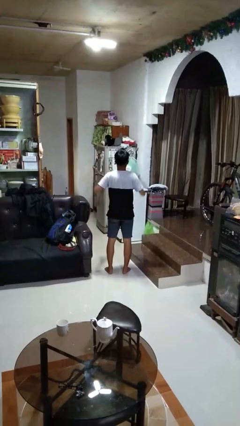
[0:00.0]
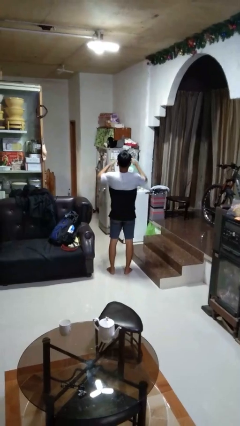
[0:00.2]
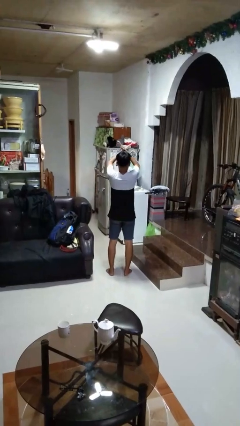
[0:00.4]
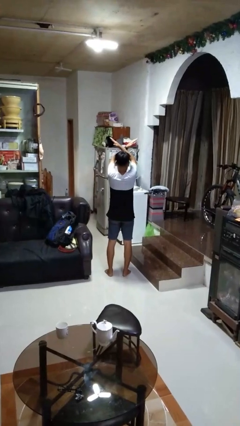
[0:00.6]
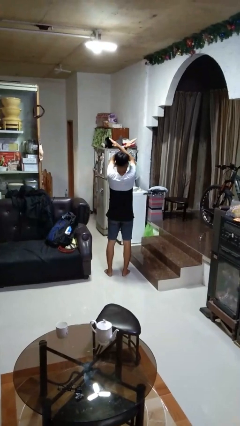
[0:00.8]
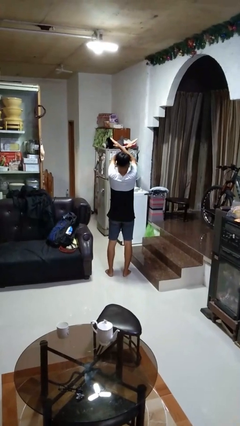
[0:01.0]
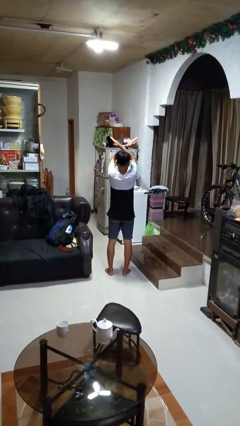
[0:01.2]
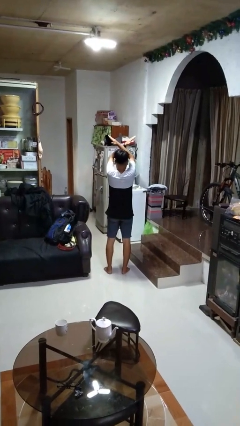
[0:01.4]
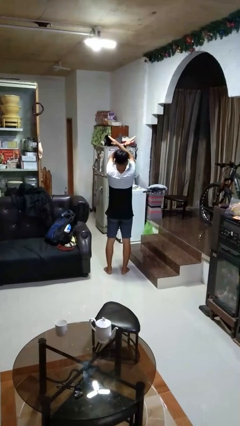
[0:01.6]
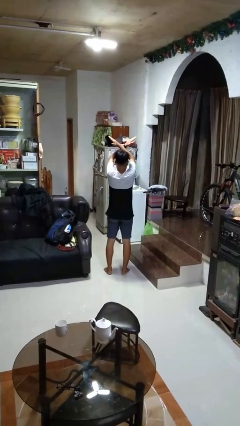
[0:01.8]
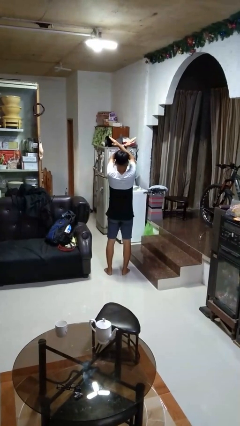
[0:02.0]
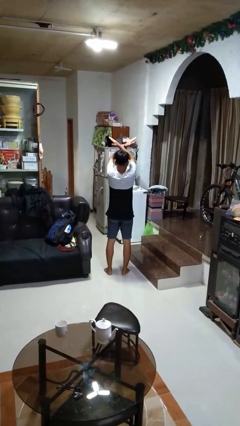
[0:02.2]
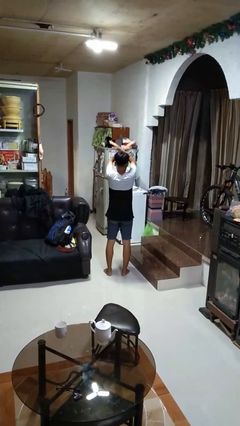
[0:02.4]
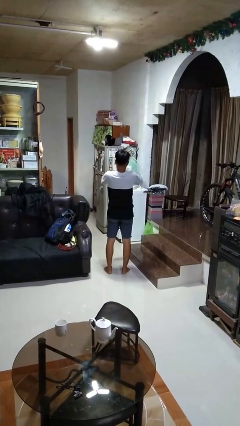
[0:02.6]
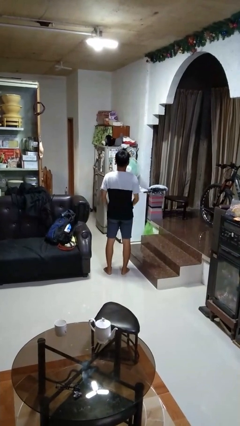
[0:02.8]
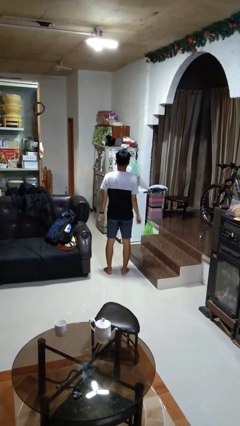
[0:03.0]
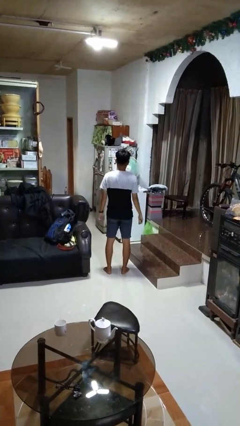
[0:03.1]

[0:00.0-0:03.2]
person gestures arms x

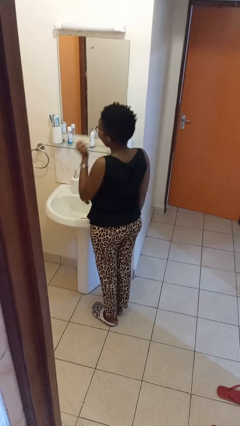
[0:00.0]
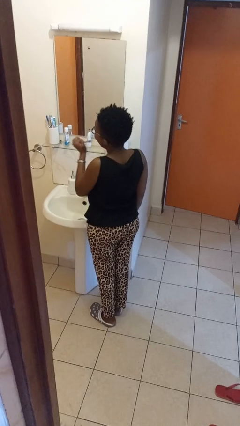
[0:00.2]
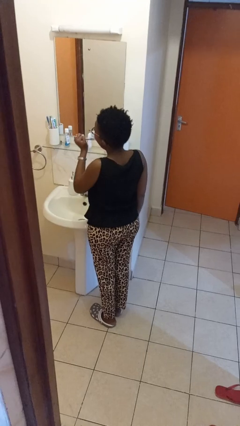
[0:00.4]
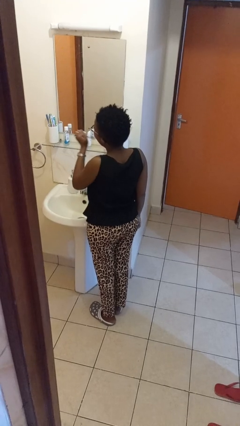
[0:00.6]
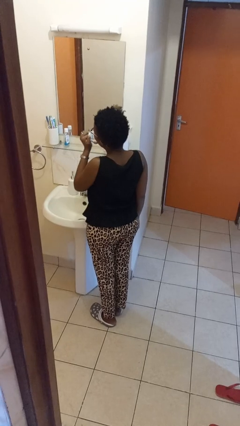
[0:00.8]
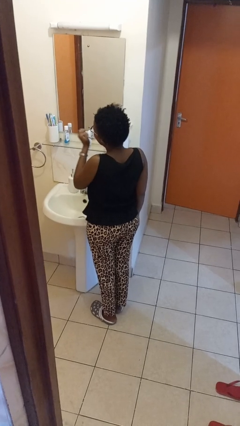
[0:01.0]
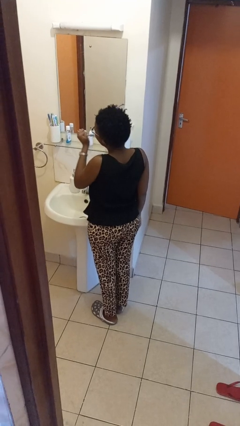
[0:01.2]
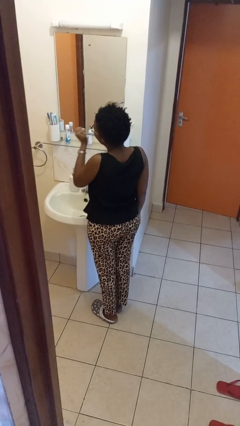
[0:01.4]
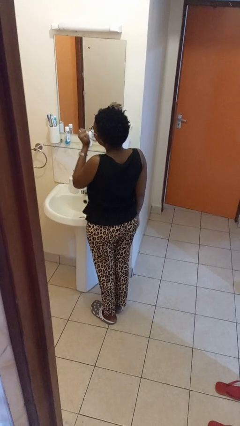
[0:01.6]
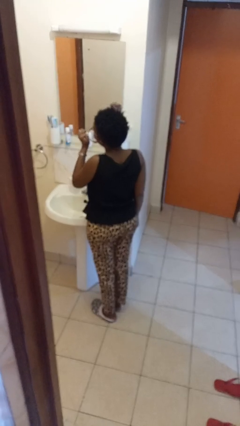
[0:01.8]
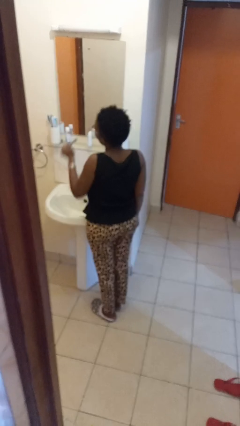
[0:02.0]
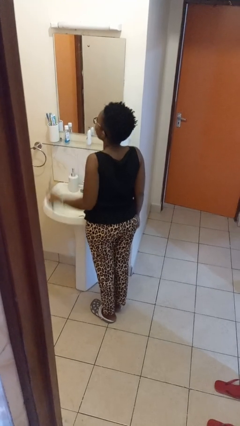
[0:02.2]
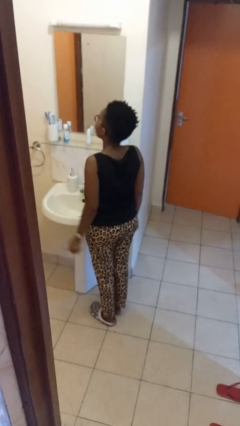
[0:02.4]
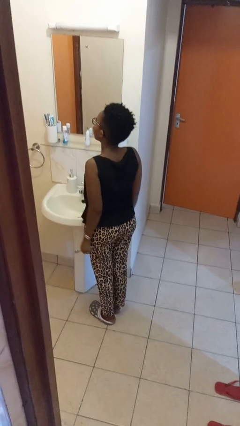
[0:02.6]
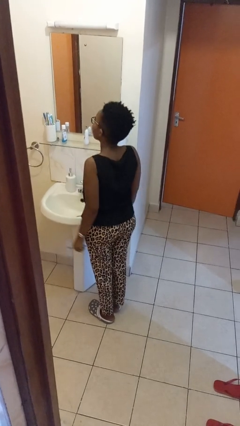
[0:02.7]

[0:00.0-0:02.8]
person brushes teeth

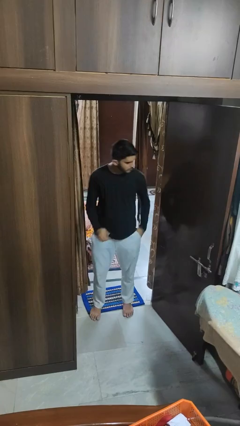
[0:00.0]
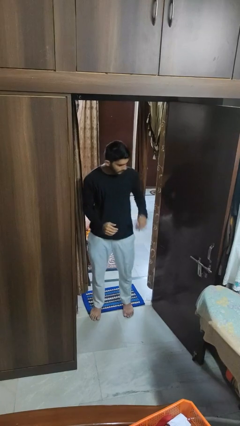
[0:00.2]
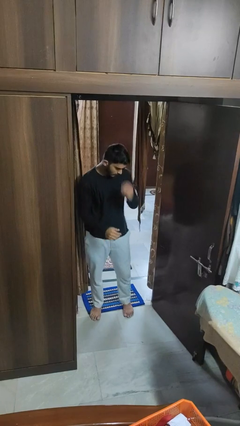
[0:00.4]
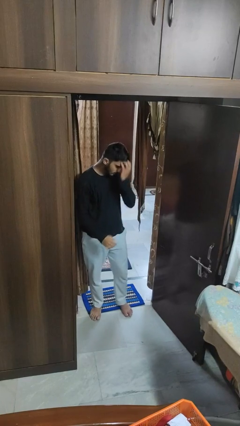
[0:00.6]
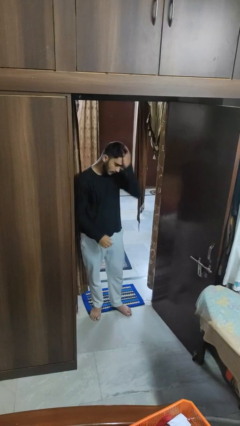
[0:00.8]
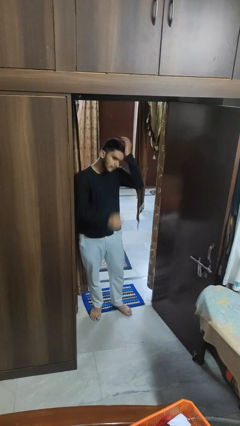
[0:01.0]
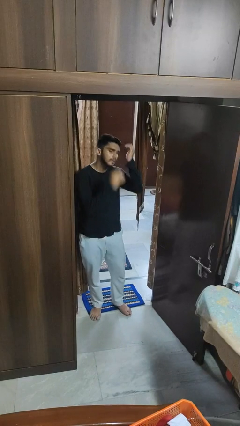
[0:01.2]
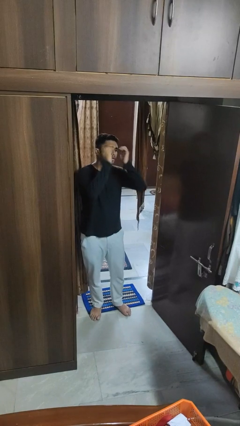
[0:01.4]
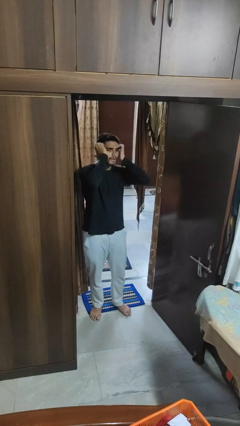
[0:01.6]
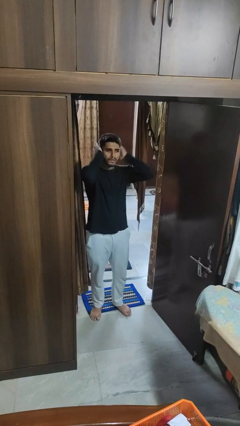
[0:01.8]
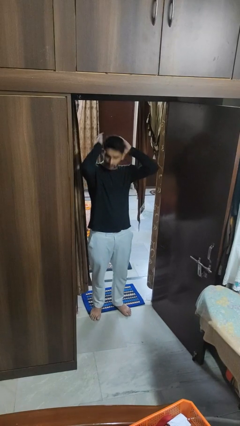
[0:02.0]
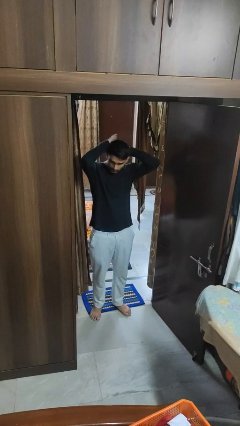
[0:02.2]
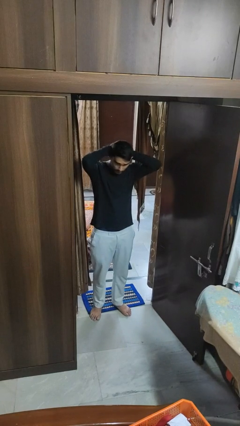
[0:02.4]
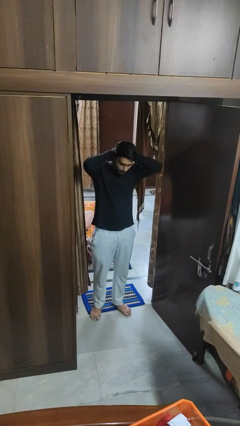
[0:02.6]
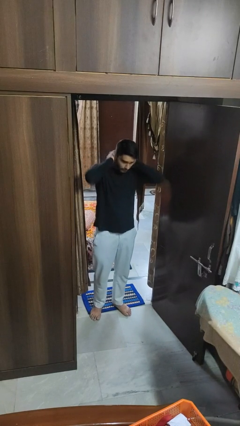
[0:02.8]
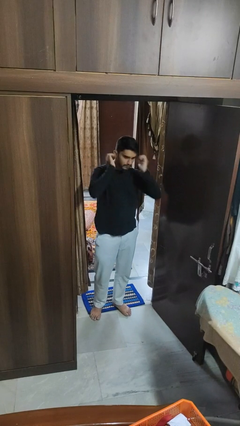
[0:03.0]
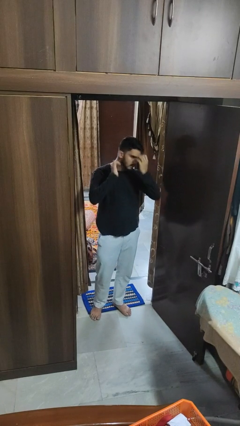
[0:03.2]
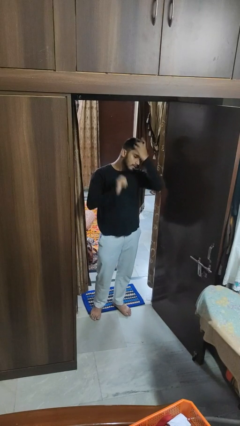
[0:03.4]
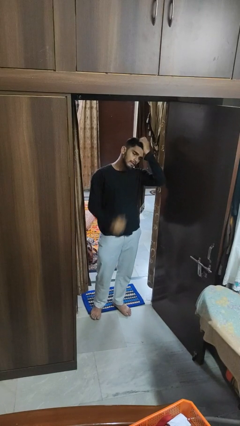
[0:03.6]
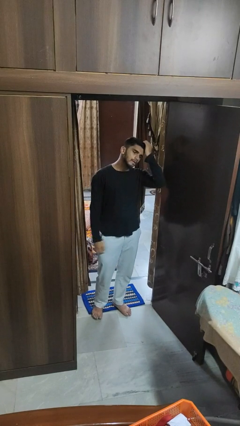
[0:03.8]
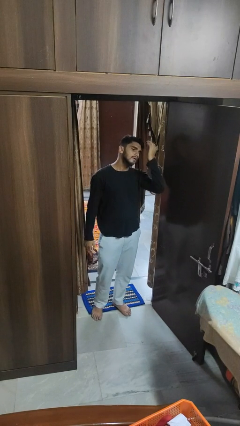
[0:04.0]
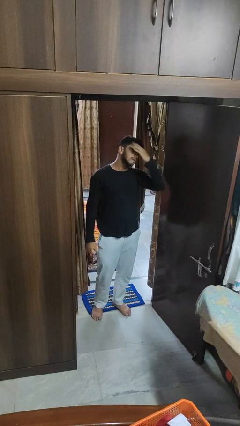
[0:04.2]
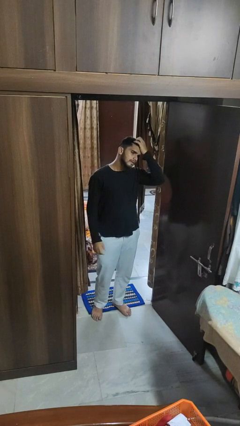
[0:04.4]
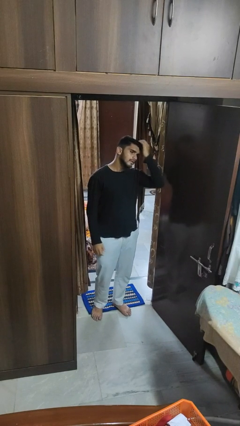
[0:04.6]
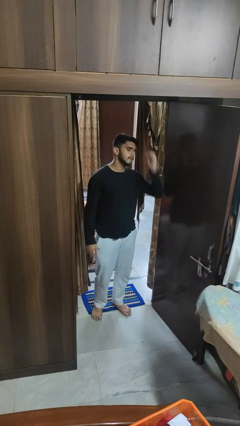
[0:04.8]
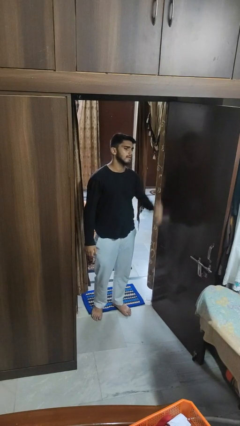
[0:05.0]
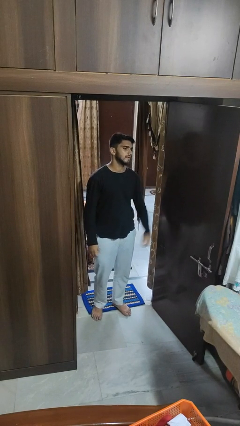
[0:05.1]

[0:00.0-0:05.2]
person strokes hair

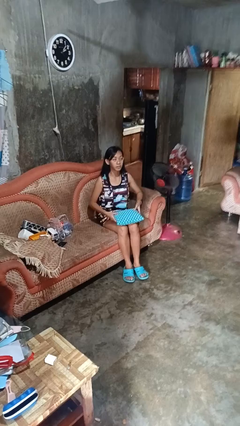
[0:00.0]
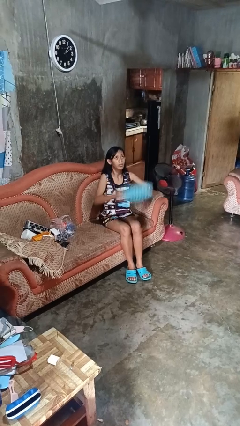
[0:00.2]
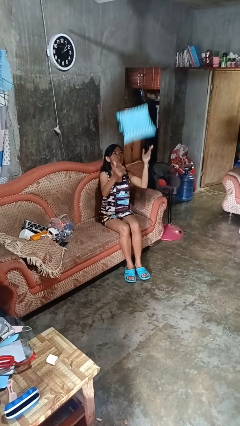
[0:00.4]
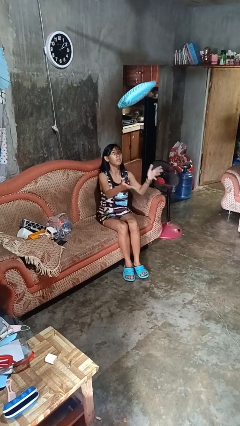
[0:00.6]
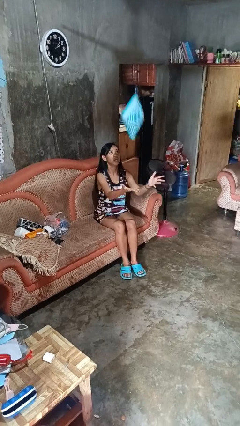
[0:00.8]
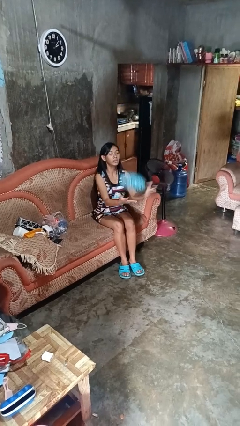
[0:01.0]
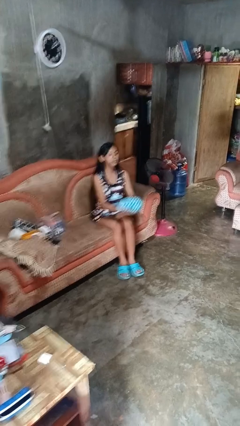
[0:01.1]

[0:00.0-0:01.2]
person drops object

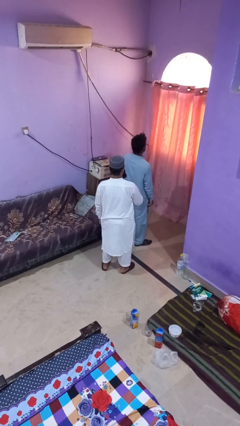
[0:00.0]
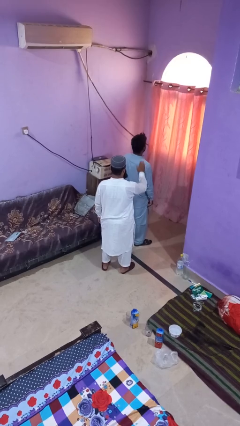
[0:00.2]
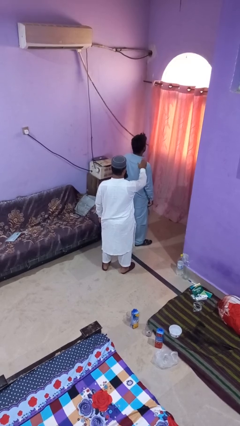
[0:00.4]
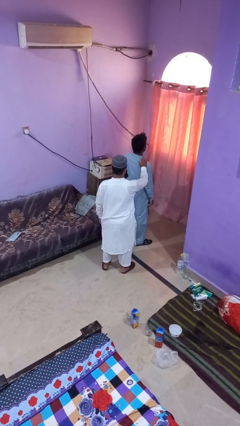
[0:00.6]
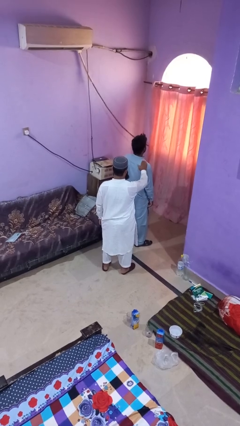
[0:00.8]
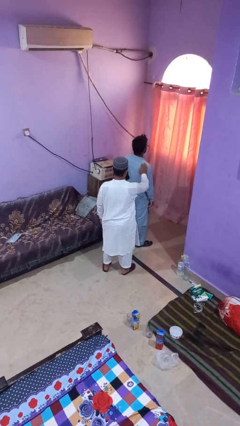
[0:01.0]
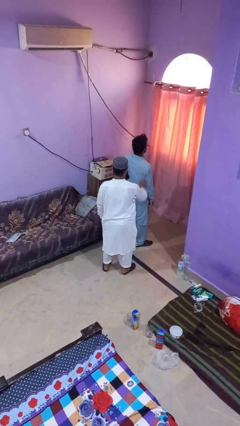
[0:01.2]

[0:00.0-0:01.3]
person pounds shoulders of person

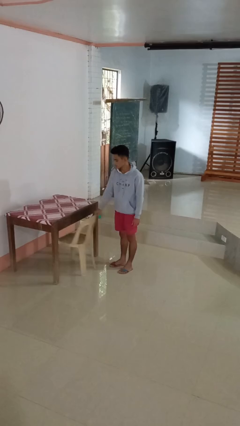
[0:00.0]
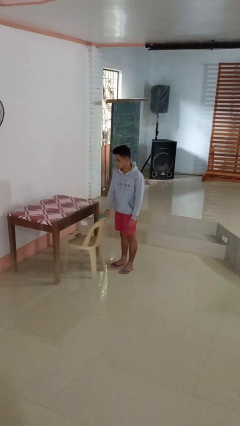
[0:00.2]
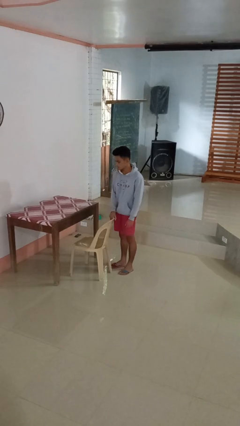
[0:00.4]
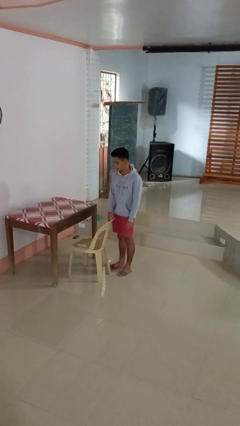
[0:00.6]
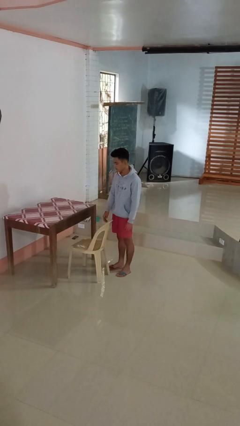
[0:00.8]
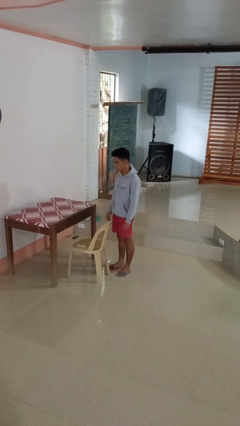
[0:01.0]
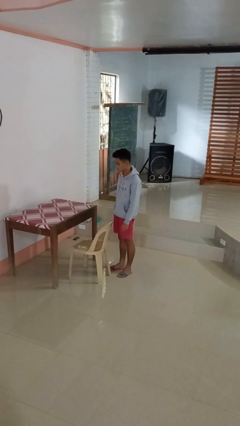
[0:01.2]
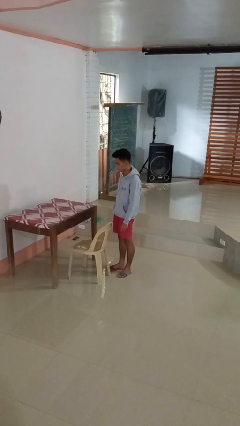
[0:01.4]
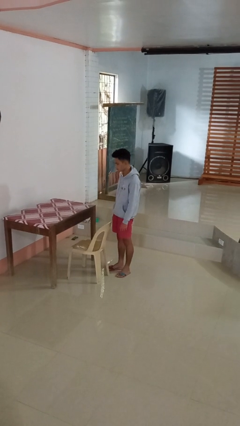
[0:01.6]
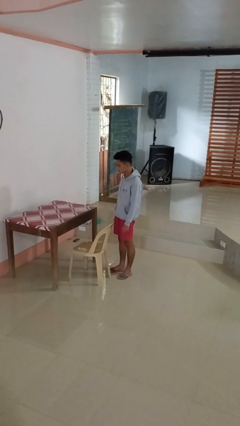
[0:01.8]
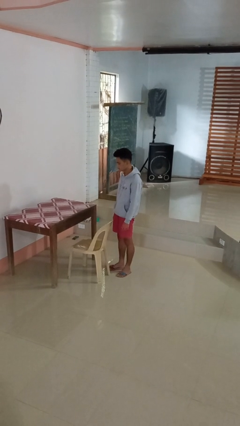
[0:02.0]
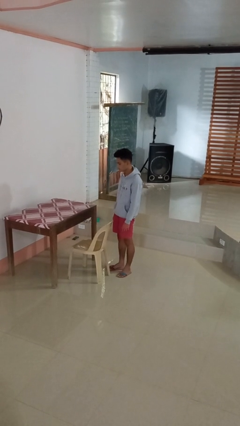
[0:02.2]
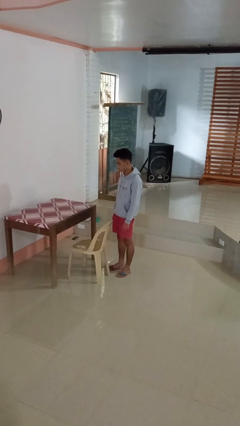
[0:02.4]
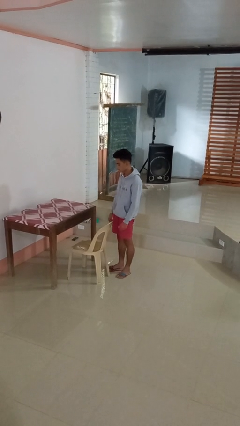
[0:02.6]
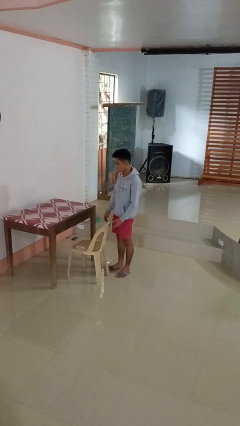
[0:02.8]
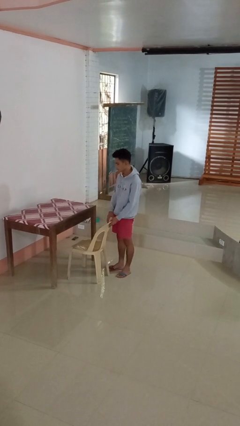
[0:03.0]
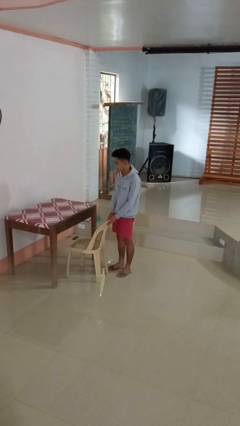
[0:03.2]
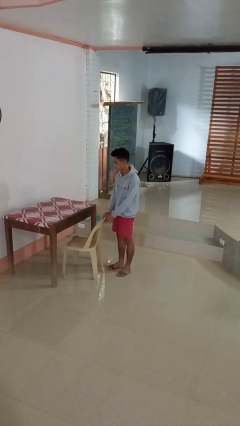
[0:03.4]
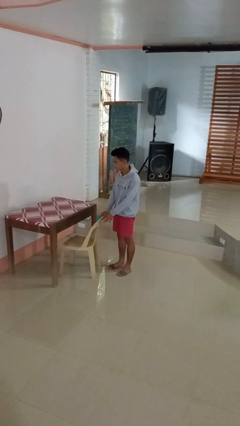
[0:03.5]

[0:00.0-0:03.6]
person pulls out chair
